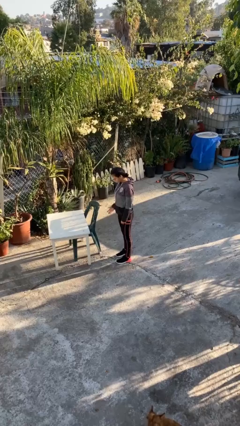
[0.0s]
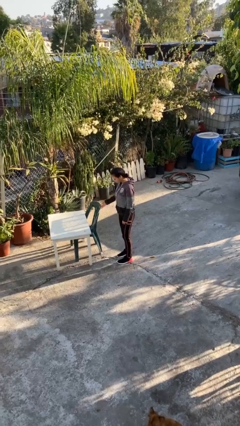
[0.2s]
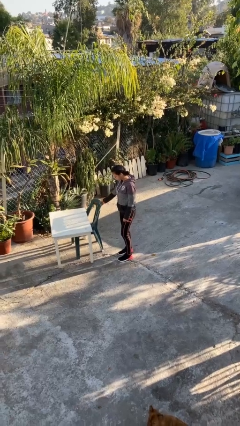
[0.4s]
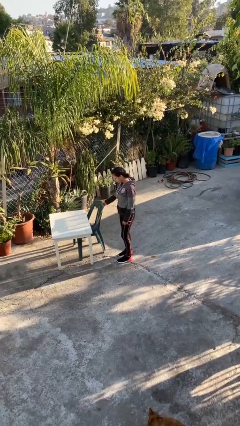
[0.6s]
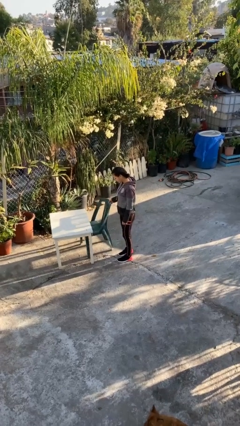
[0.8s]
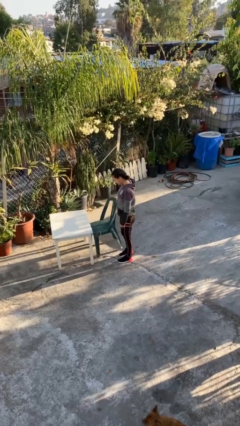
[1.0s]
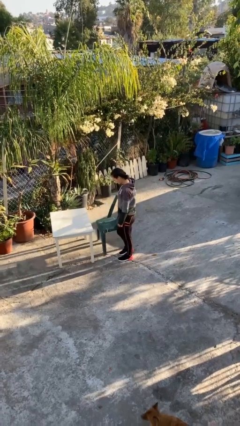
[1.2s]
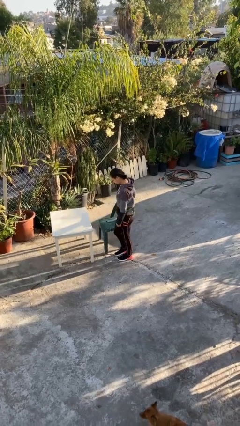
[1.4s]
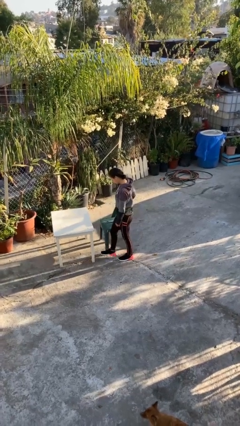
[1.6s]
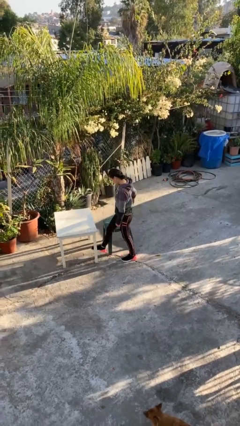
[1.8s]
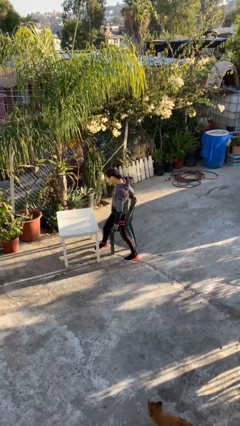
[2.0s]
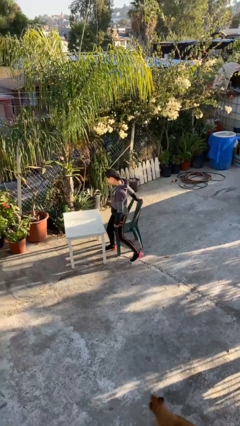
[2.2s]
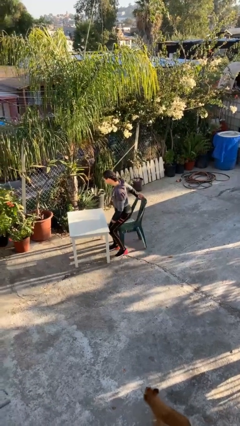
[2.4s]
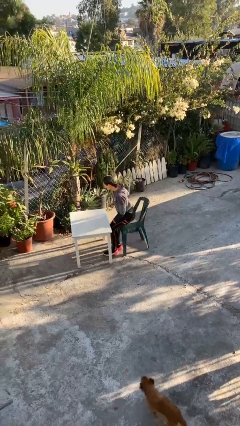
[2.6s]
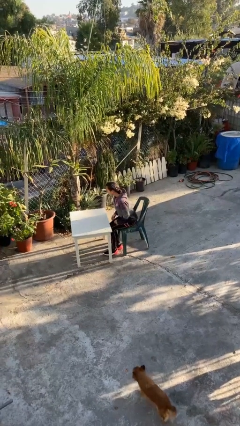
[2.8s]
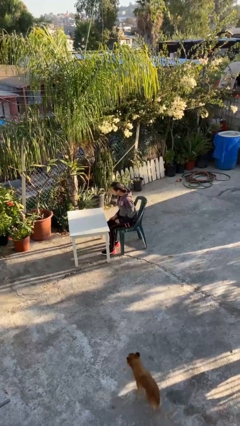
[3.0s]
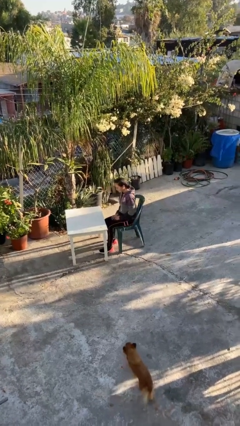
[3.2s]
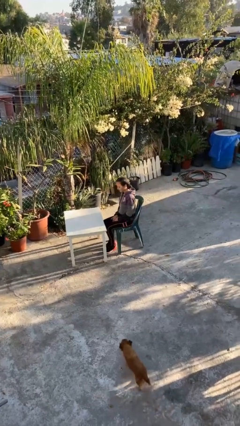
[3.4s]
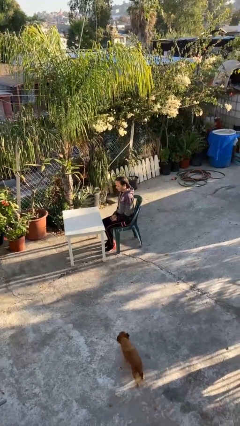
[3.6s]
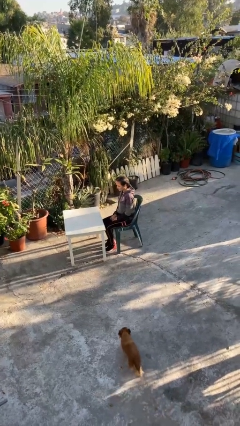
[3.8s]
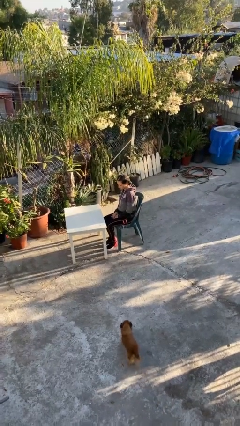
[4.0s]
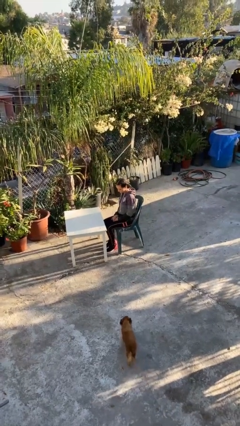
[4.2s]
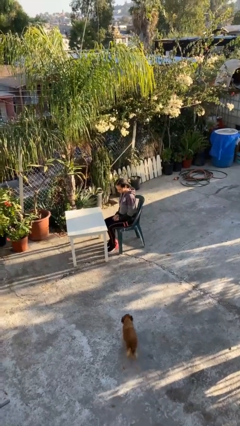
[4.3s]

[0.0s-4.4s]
person sits down

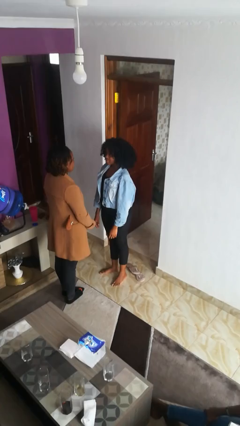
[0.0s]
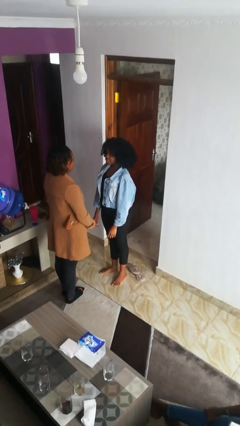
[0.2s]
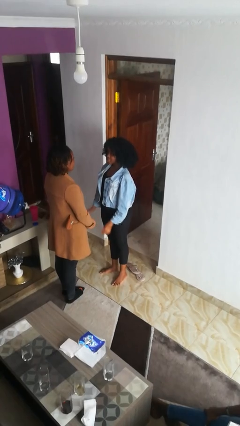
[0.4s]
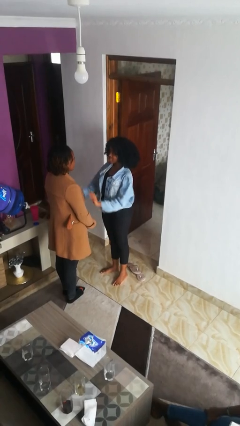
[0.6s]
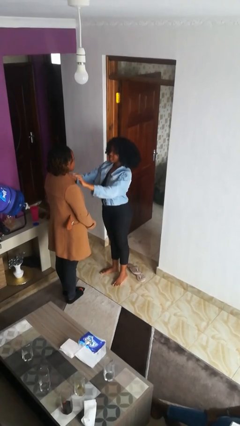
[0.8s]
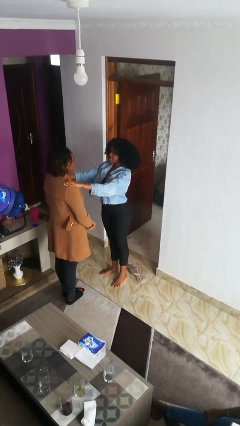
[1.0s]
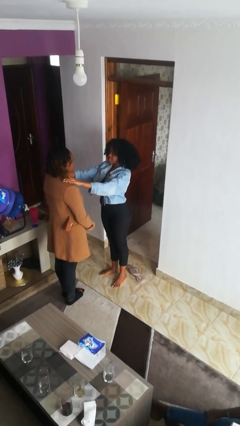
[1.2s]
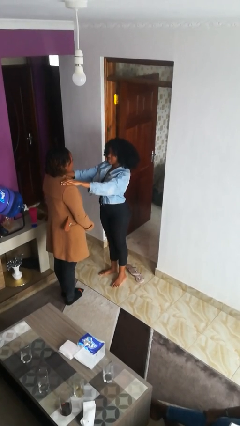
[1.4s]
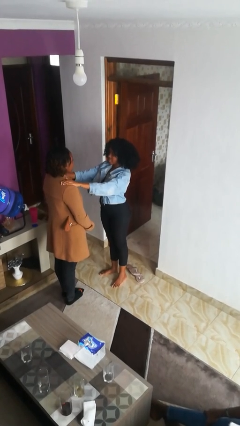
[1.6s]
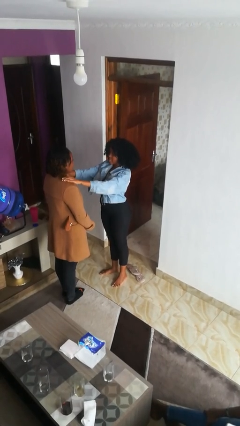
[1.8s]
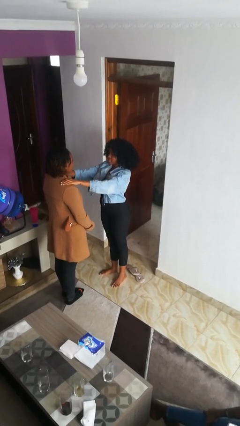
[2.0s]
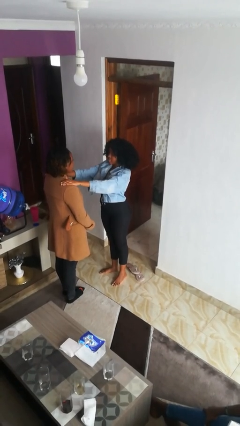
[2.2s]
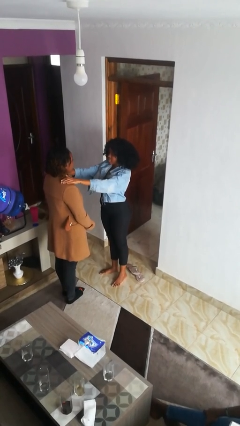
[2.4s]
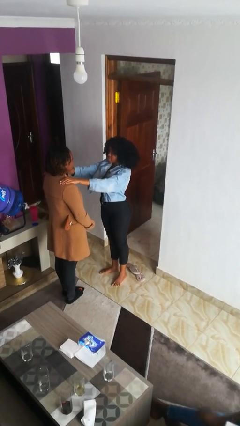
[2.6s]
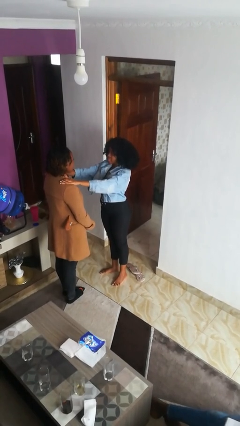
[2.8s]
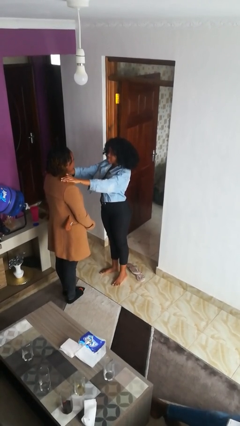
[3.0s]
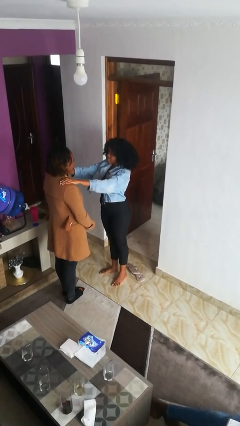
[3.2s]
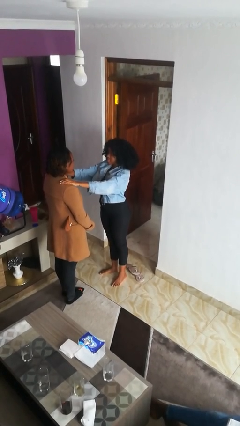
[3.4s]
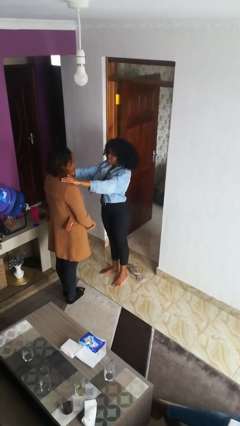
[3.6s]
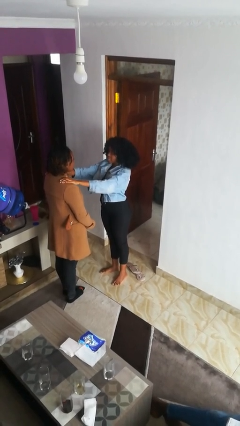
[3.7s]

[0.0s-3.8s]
person pounds shoulders of person

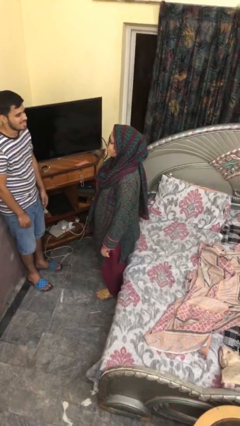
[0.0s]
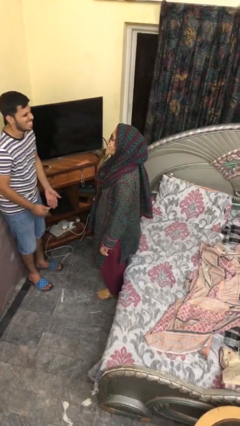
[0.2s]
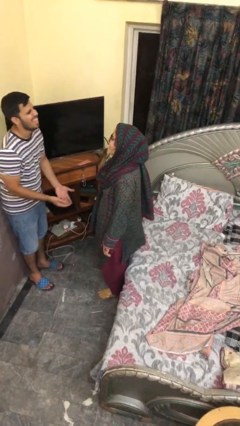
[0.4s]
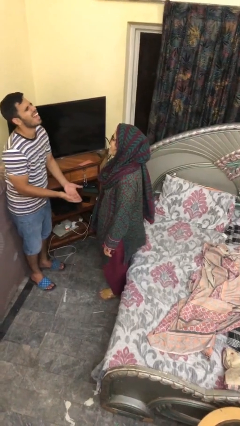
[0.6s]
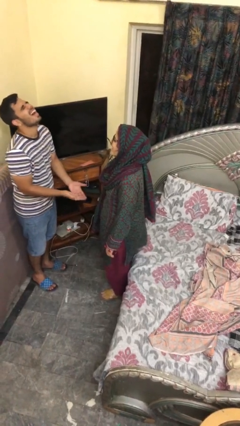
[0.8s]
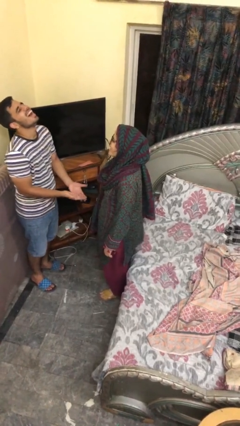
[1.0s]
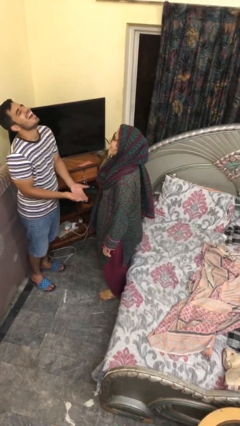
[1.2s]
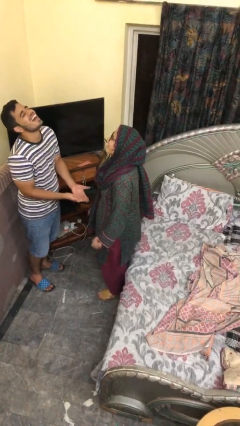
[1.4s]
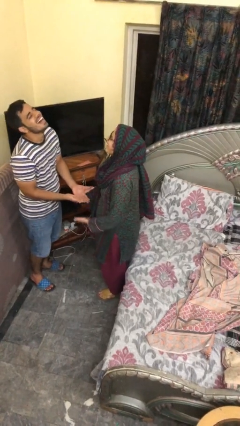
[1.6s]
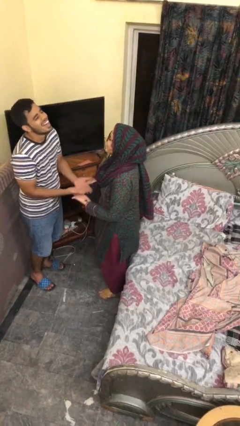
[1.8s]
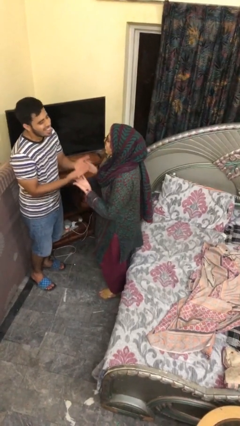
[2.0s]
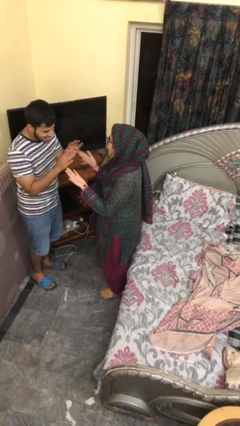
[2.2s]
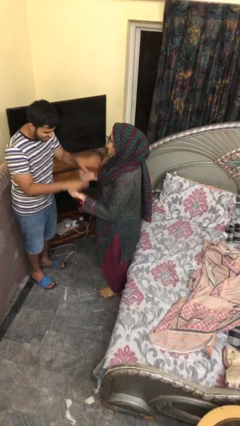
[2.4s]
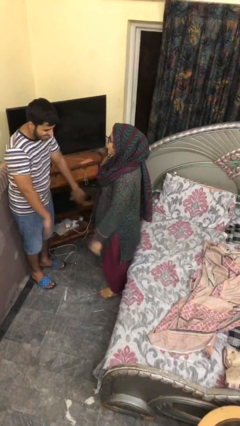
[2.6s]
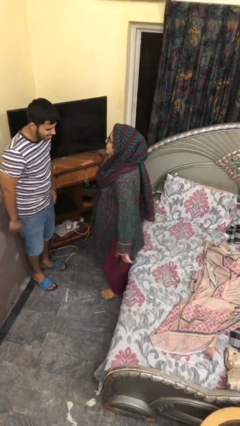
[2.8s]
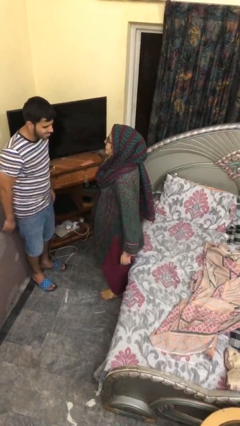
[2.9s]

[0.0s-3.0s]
person laughs with person

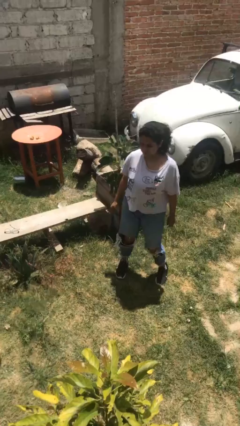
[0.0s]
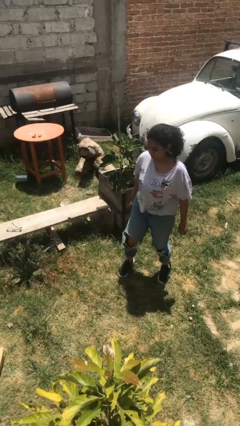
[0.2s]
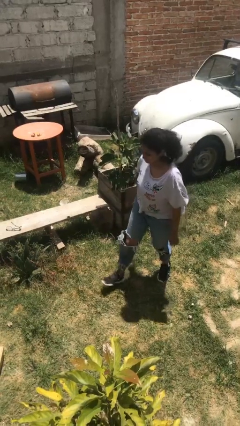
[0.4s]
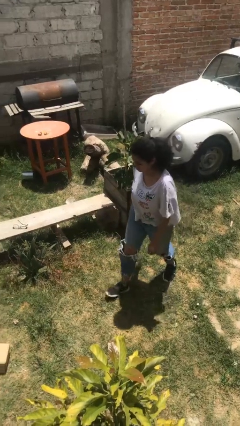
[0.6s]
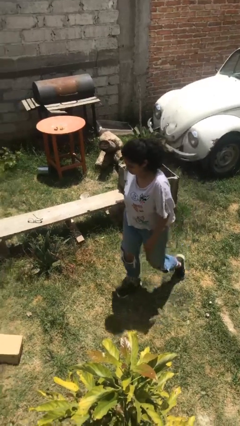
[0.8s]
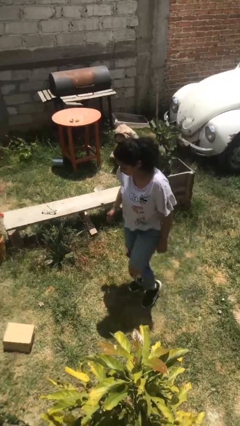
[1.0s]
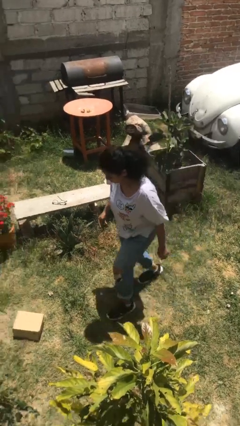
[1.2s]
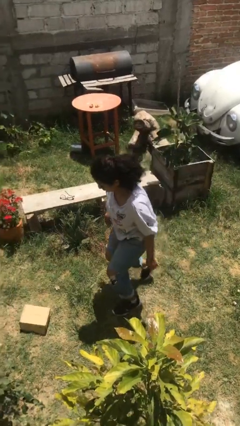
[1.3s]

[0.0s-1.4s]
person trips on object on floor

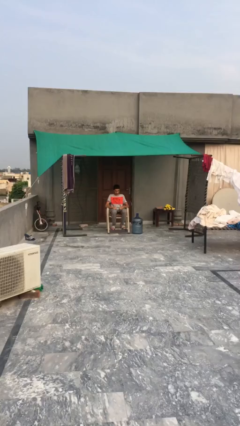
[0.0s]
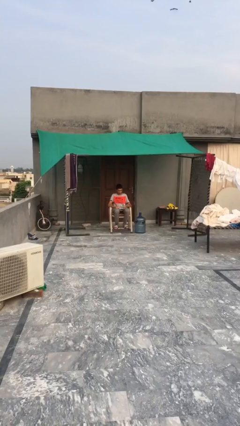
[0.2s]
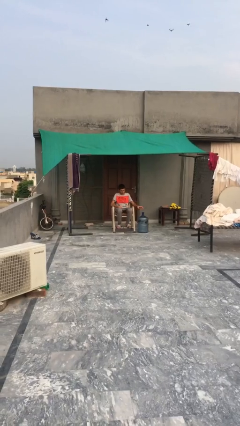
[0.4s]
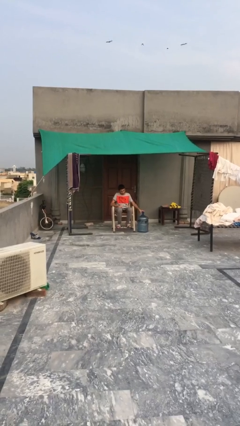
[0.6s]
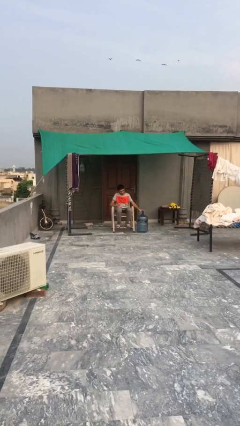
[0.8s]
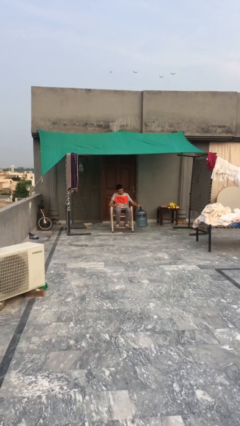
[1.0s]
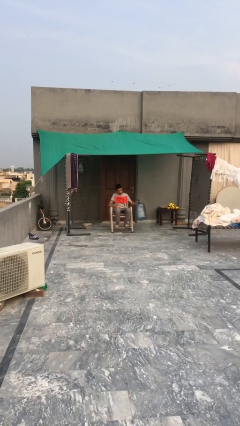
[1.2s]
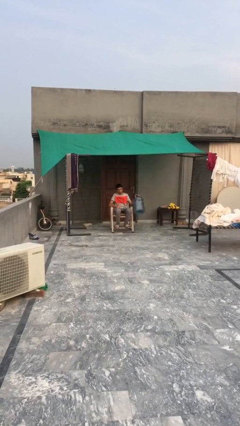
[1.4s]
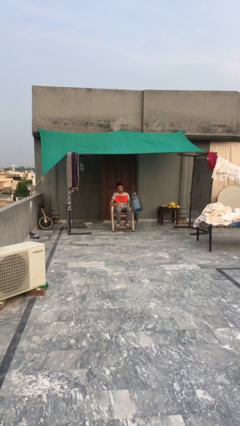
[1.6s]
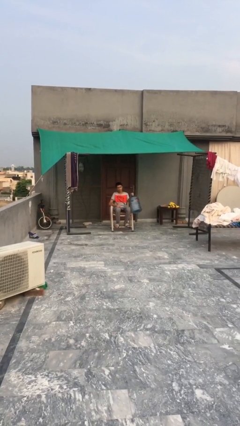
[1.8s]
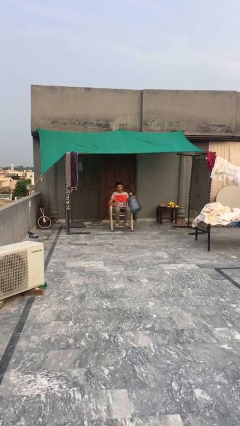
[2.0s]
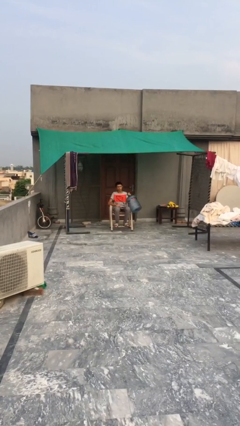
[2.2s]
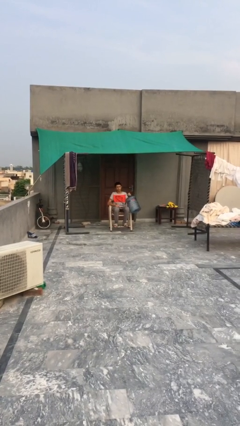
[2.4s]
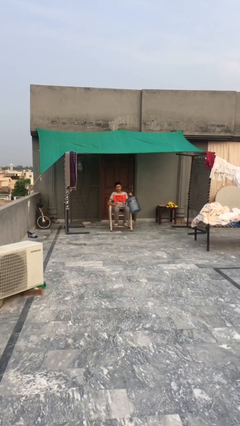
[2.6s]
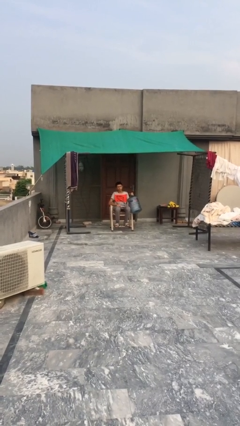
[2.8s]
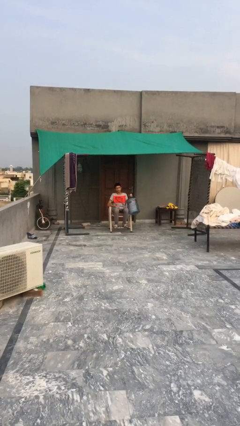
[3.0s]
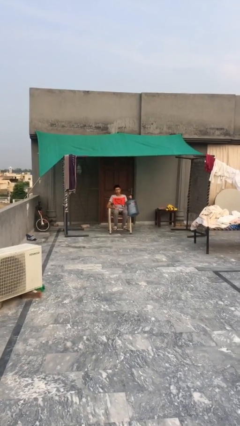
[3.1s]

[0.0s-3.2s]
person picks up object from floor

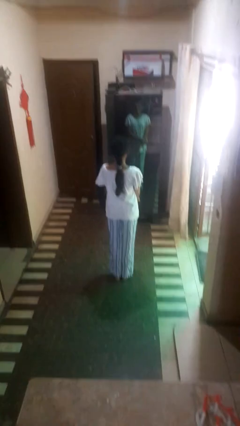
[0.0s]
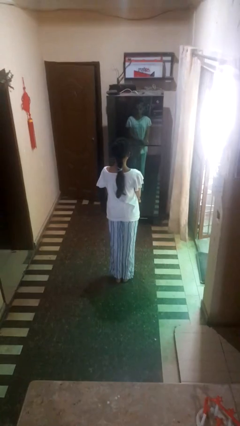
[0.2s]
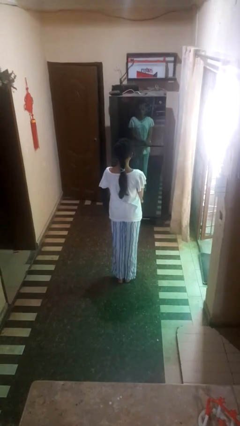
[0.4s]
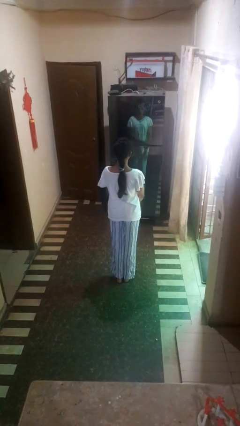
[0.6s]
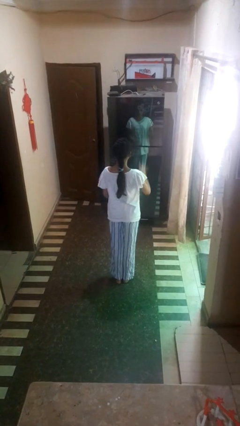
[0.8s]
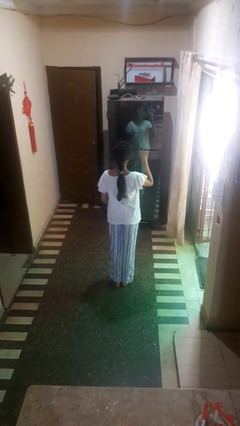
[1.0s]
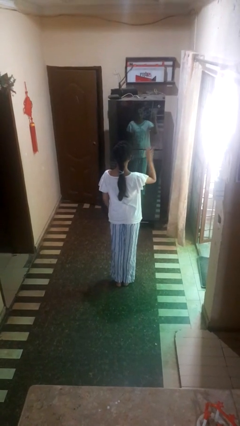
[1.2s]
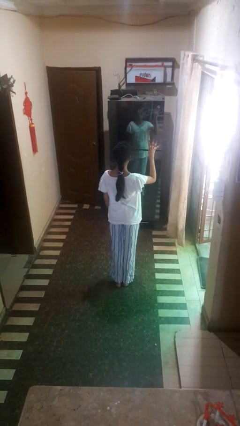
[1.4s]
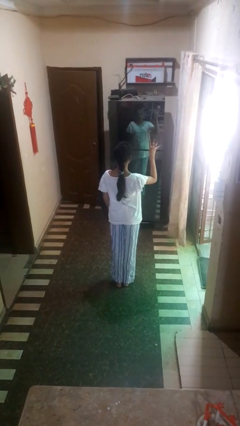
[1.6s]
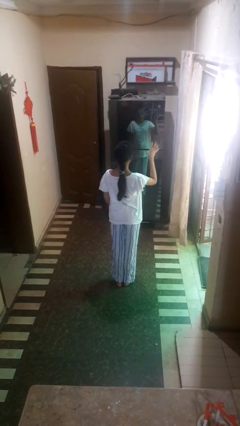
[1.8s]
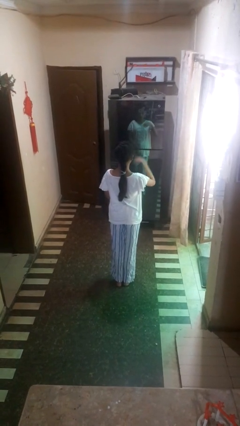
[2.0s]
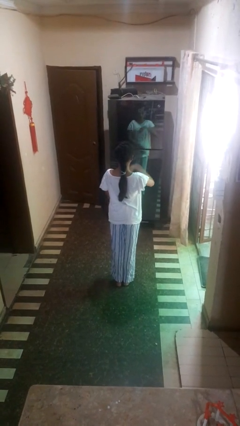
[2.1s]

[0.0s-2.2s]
person gestures number four
